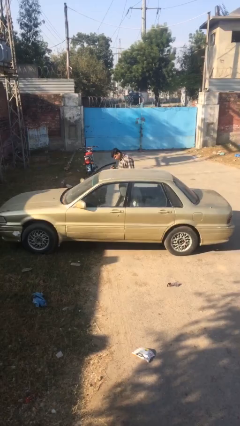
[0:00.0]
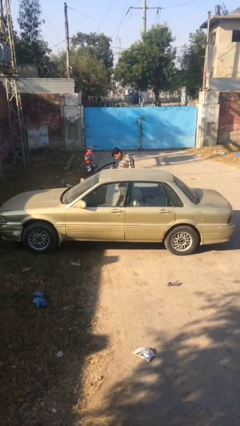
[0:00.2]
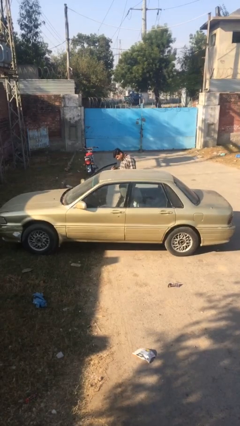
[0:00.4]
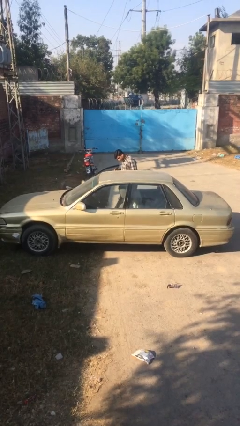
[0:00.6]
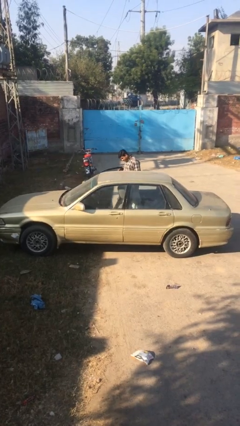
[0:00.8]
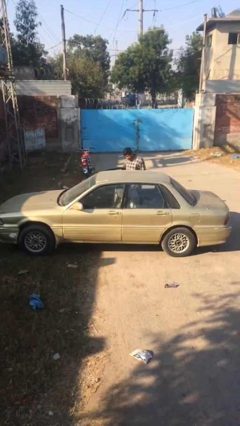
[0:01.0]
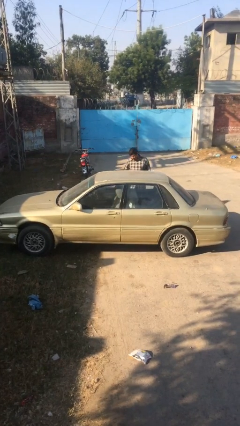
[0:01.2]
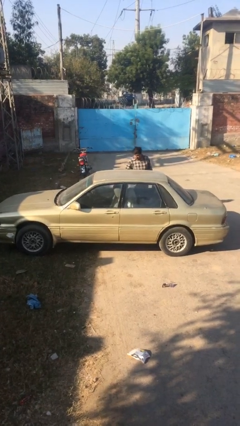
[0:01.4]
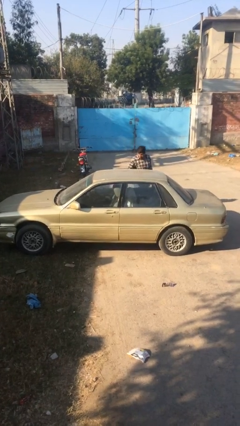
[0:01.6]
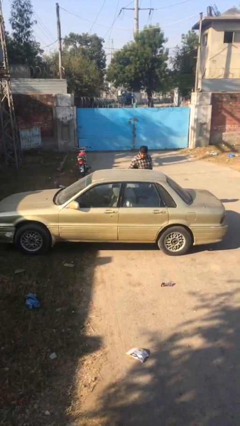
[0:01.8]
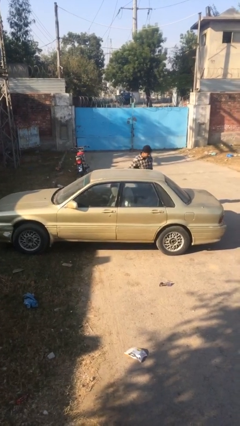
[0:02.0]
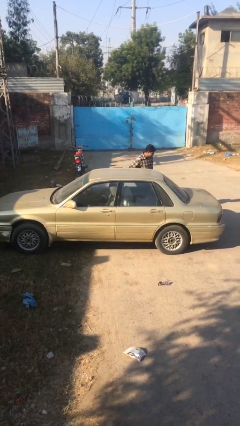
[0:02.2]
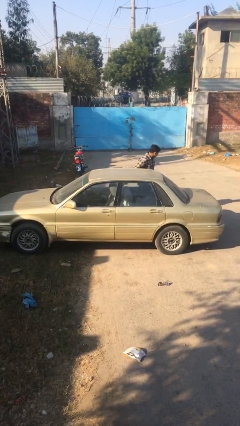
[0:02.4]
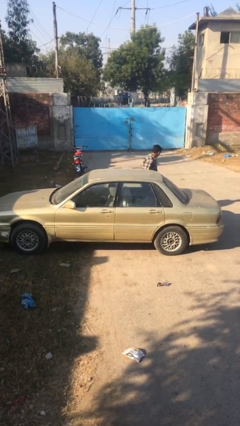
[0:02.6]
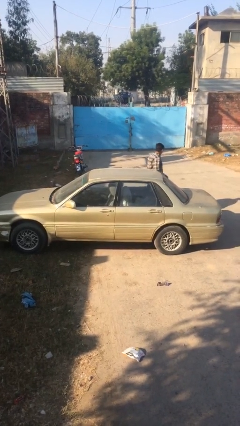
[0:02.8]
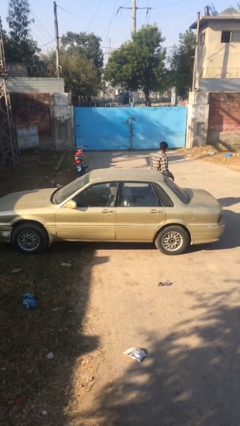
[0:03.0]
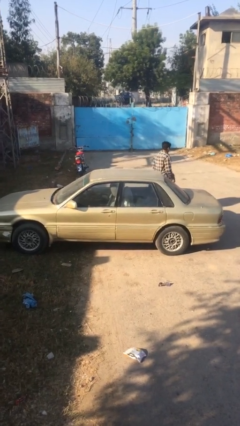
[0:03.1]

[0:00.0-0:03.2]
person closes car door

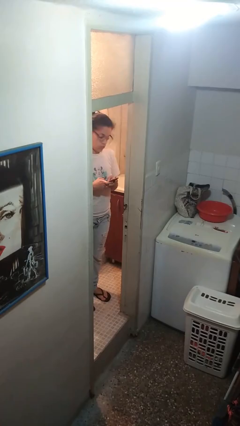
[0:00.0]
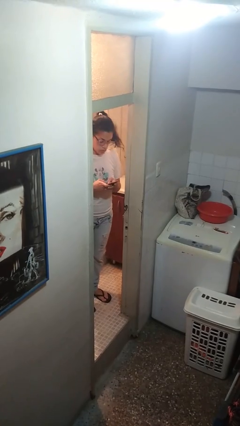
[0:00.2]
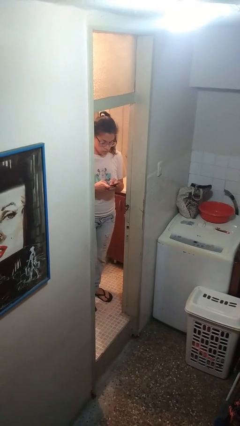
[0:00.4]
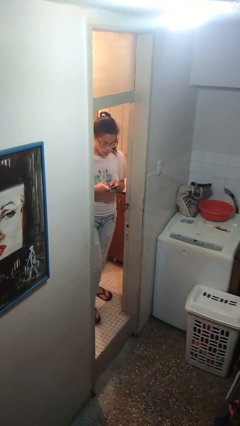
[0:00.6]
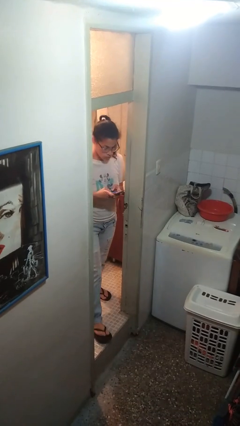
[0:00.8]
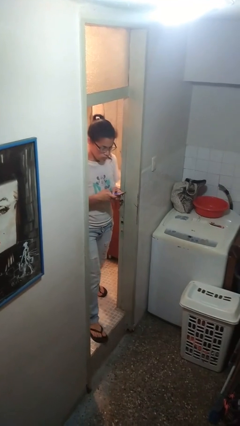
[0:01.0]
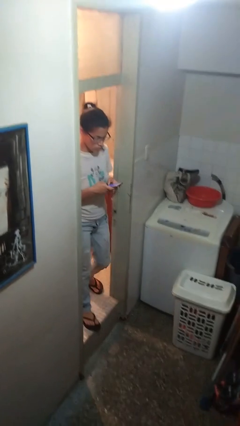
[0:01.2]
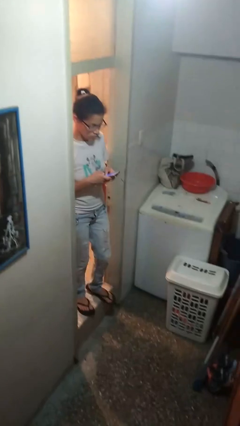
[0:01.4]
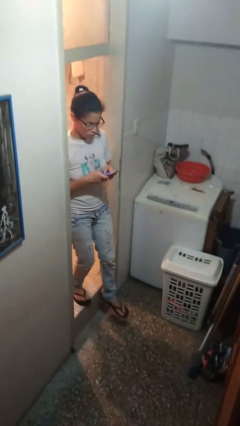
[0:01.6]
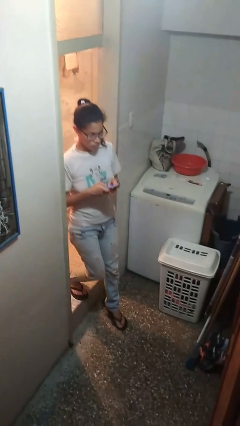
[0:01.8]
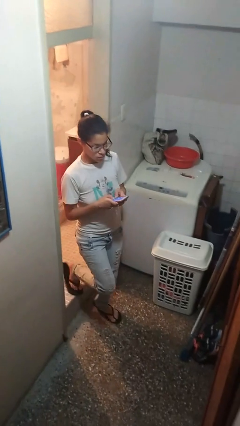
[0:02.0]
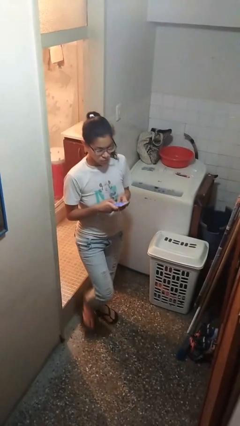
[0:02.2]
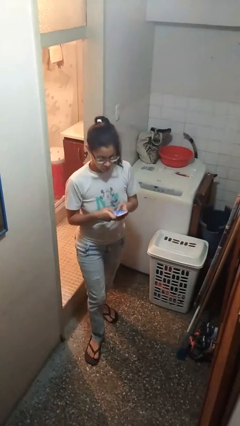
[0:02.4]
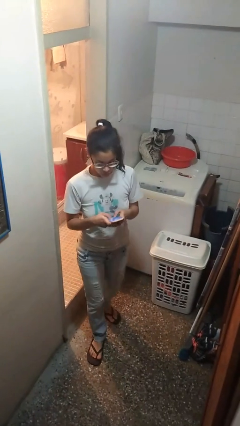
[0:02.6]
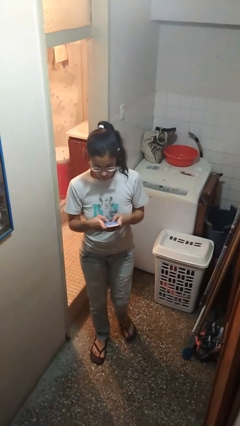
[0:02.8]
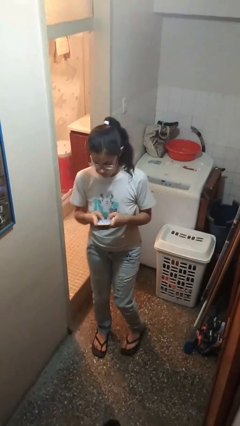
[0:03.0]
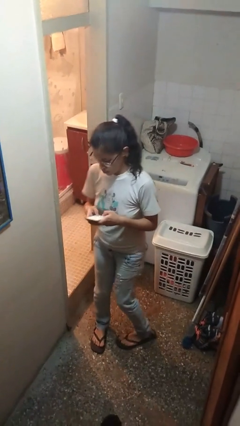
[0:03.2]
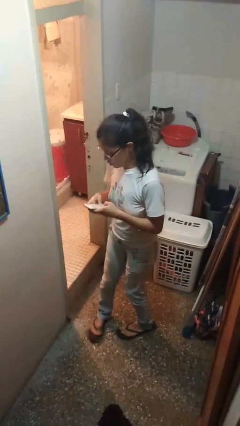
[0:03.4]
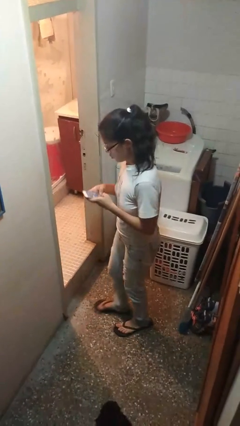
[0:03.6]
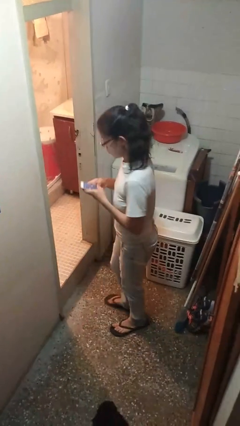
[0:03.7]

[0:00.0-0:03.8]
person enters scene through structure

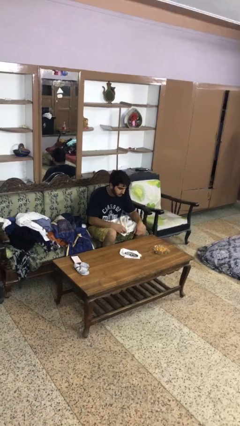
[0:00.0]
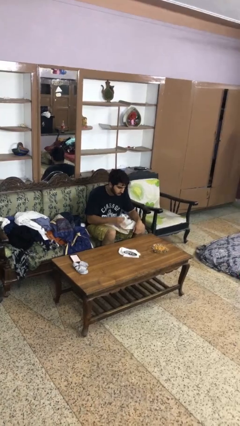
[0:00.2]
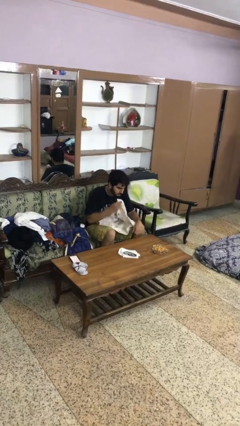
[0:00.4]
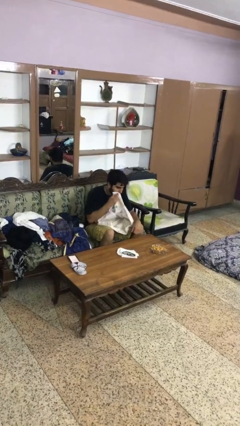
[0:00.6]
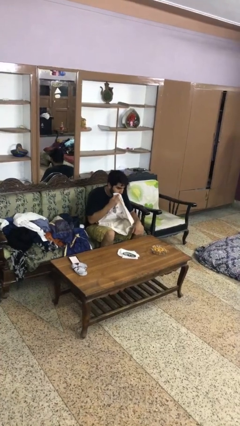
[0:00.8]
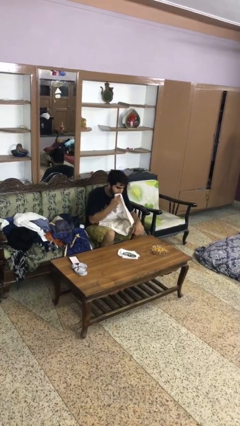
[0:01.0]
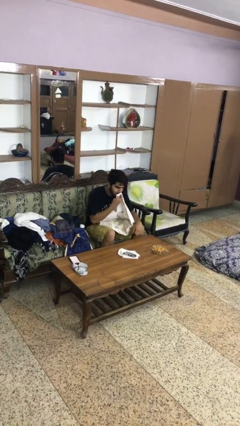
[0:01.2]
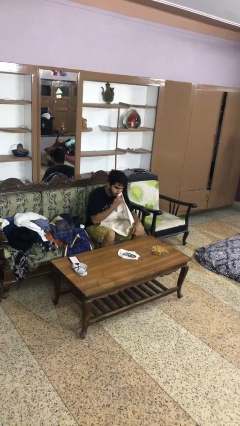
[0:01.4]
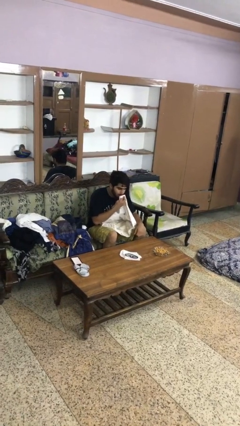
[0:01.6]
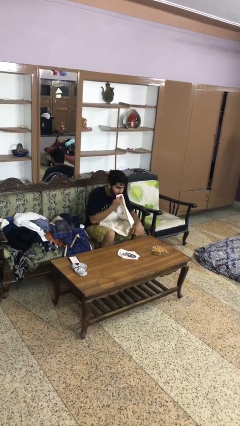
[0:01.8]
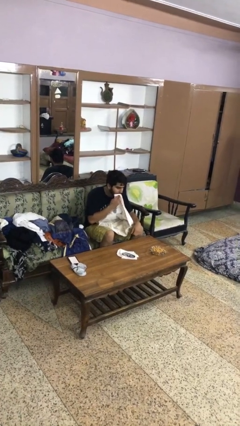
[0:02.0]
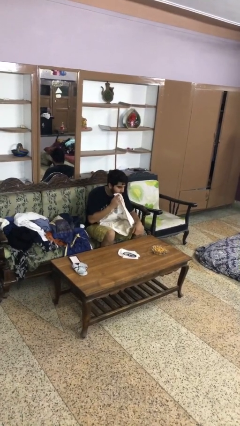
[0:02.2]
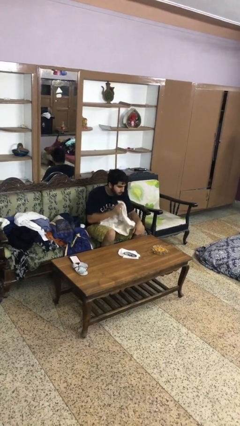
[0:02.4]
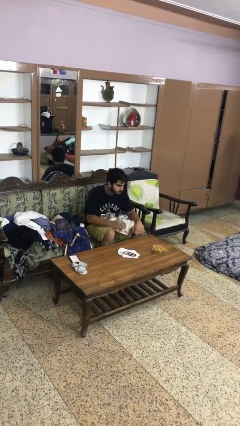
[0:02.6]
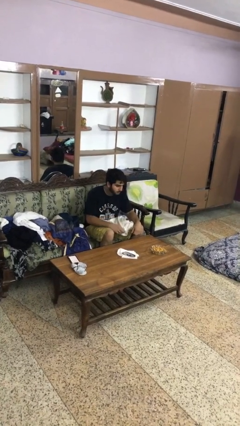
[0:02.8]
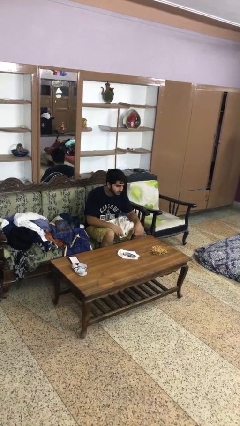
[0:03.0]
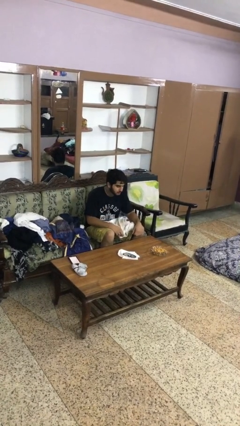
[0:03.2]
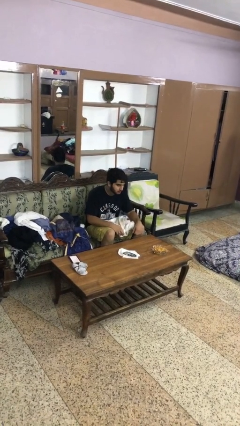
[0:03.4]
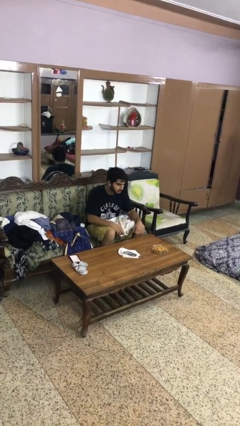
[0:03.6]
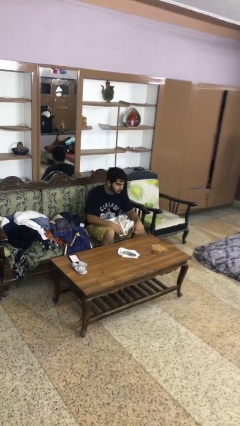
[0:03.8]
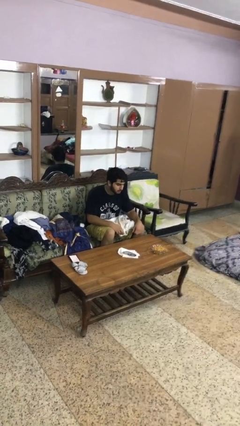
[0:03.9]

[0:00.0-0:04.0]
person wipes mouth with napkin

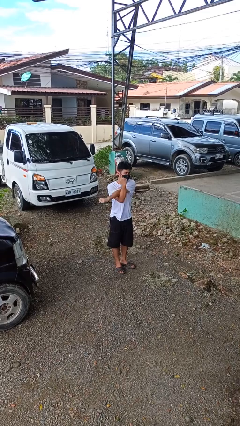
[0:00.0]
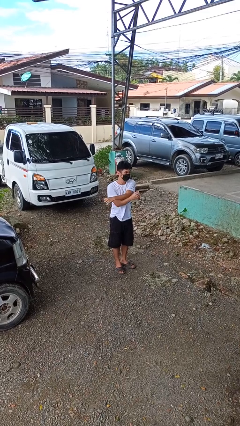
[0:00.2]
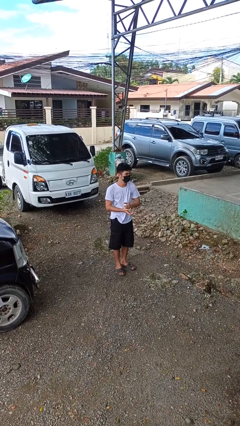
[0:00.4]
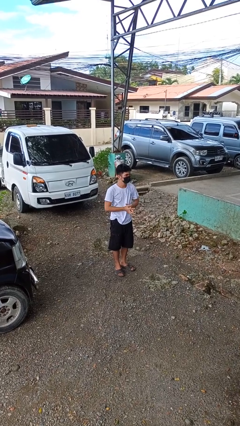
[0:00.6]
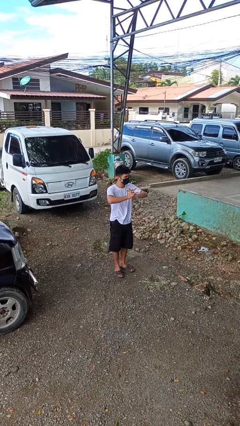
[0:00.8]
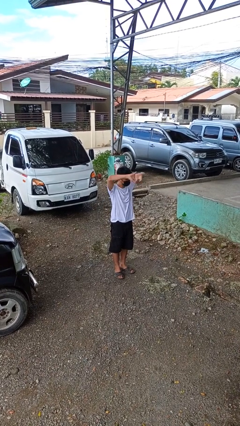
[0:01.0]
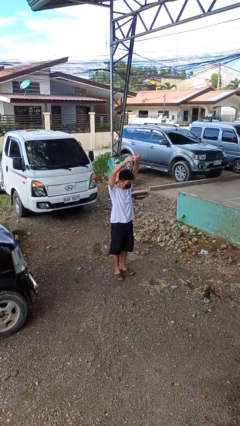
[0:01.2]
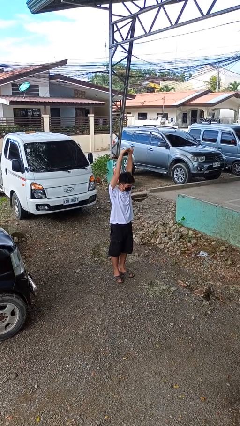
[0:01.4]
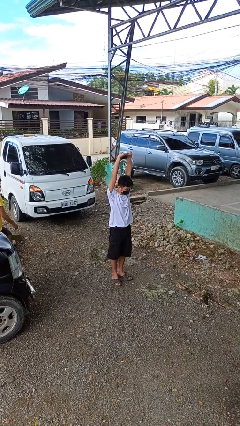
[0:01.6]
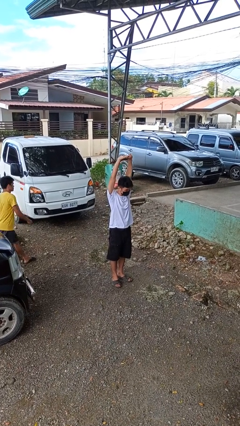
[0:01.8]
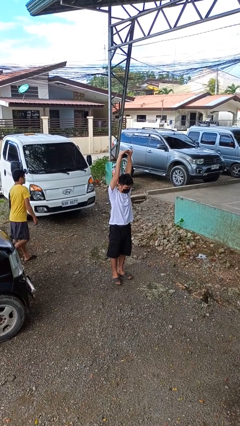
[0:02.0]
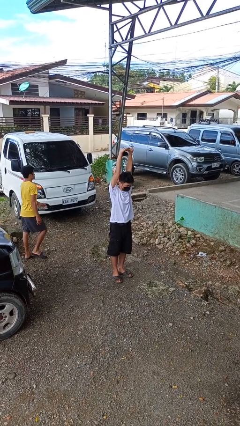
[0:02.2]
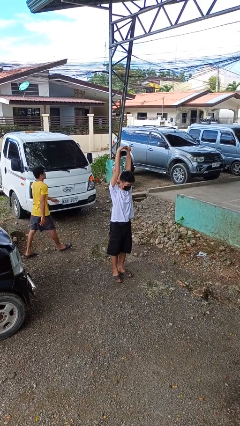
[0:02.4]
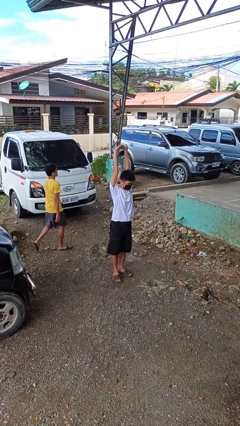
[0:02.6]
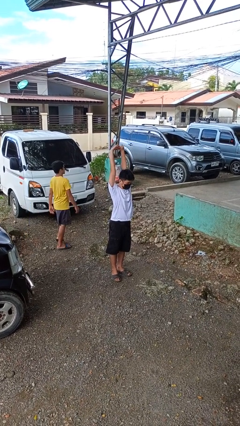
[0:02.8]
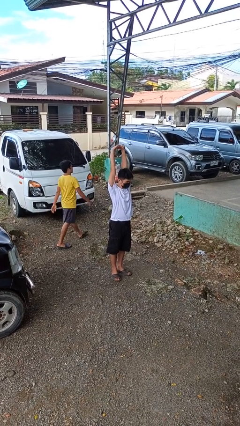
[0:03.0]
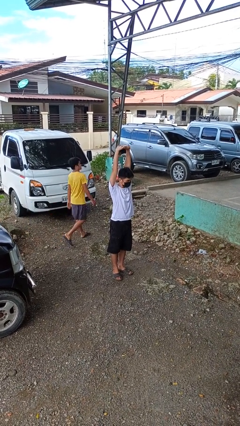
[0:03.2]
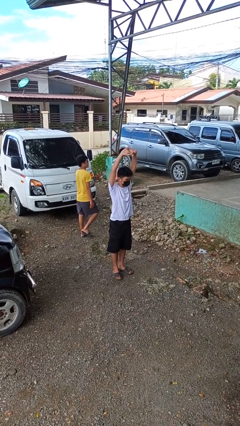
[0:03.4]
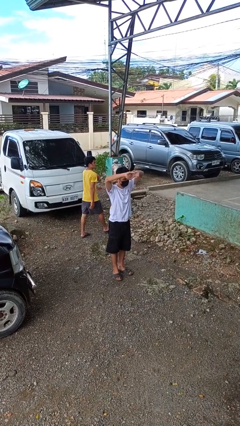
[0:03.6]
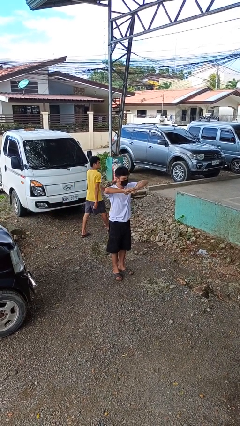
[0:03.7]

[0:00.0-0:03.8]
person stretches arms over head

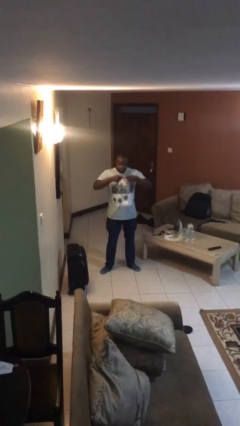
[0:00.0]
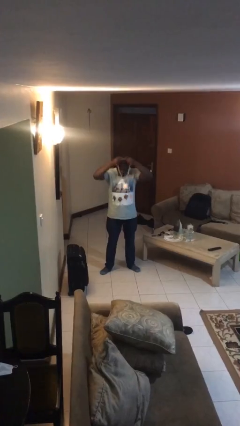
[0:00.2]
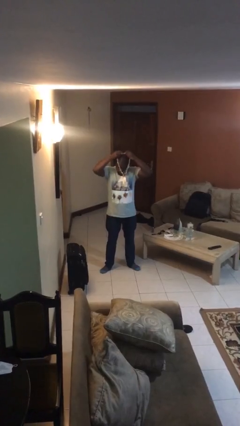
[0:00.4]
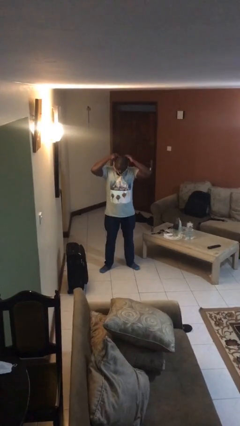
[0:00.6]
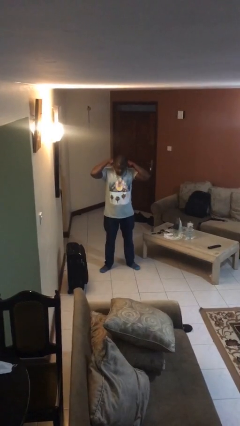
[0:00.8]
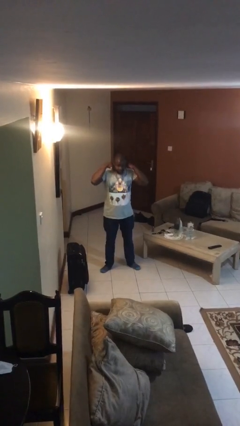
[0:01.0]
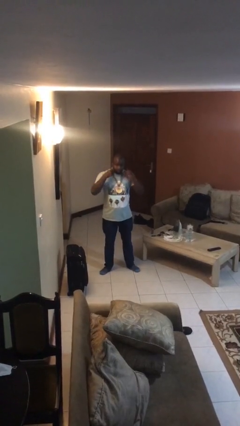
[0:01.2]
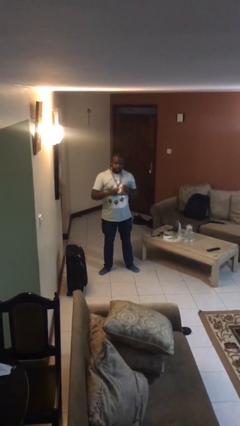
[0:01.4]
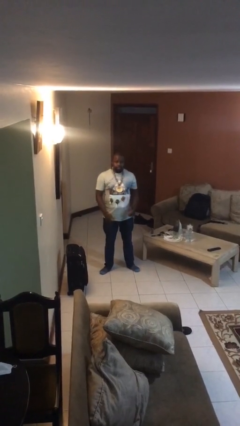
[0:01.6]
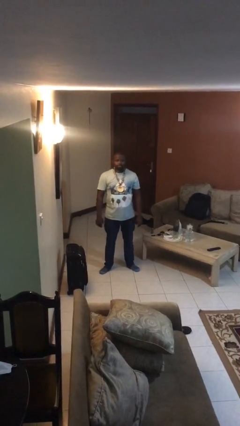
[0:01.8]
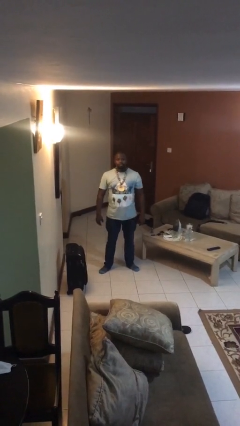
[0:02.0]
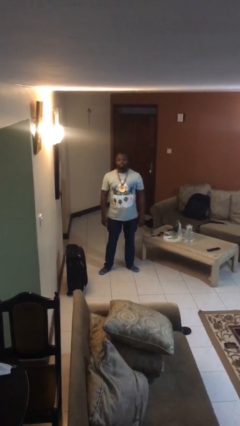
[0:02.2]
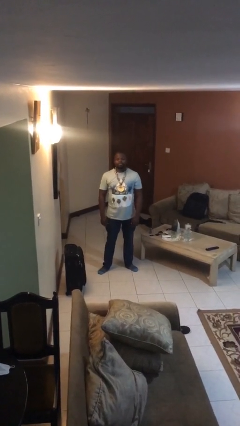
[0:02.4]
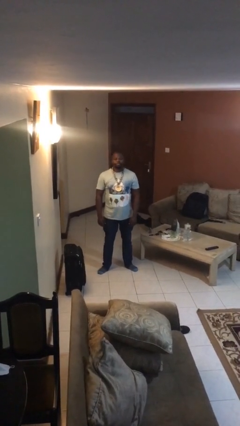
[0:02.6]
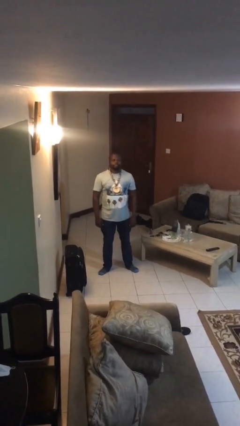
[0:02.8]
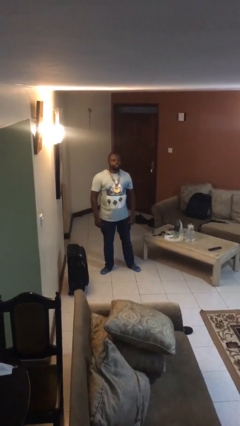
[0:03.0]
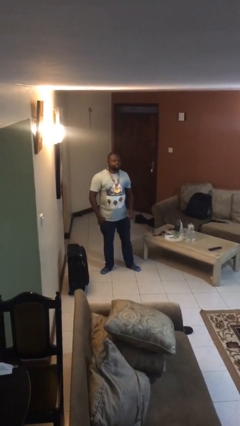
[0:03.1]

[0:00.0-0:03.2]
person puts on necklace
